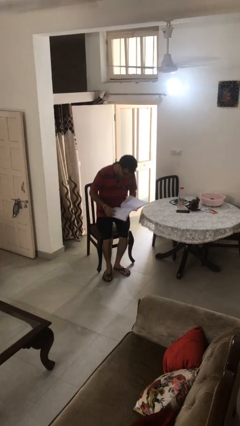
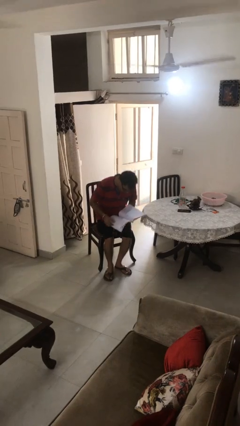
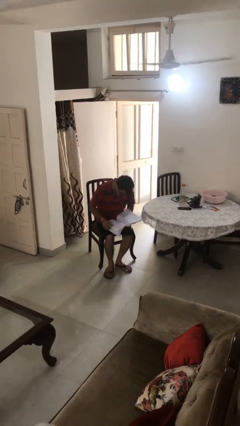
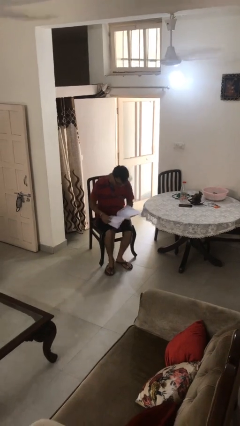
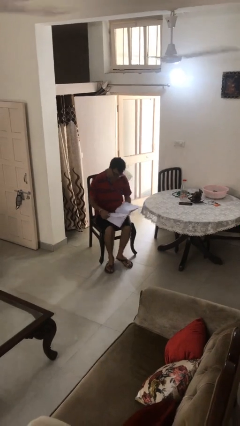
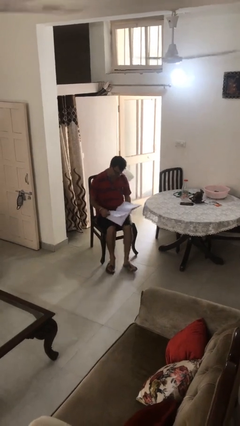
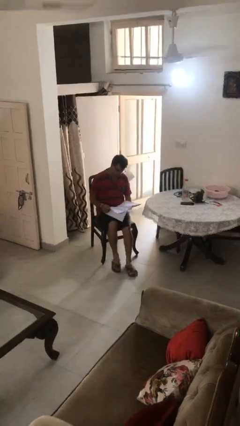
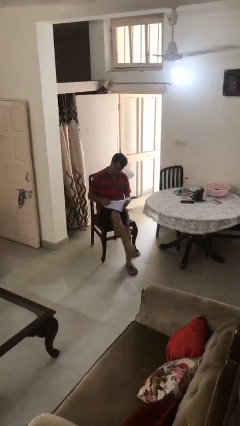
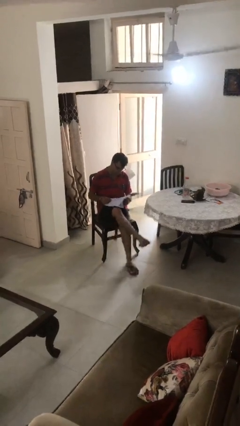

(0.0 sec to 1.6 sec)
person sits down

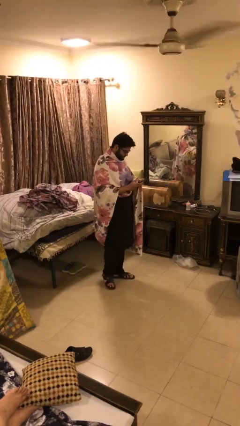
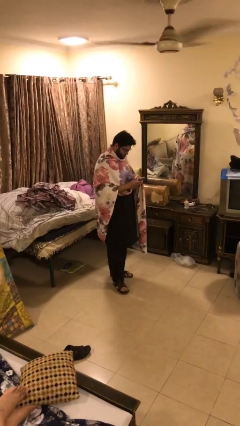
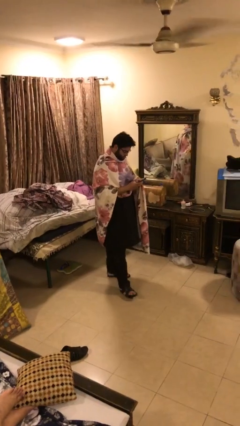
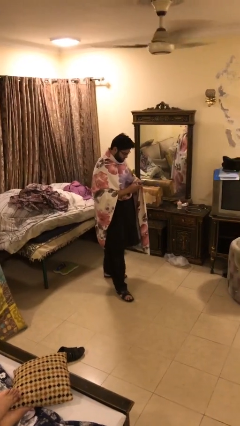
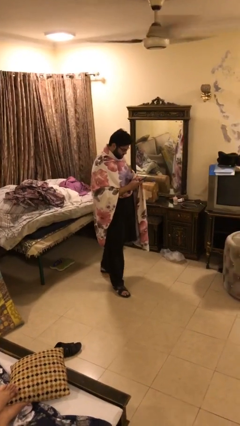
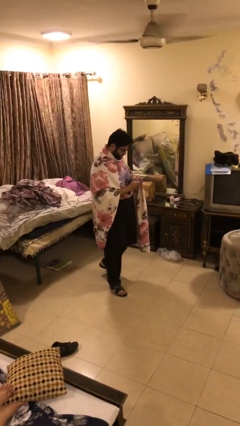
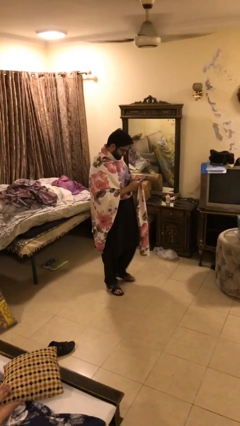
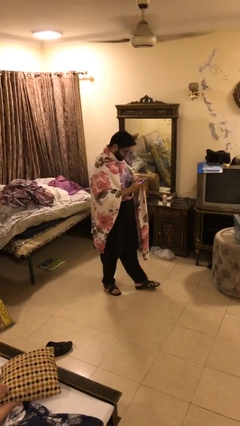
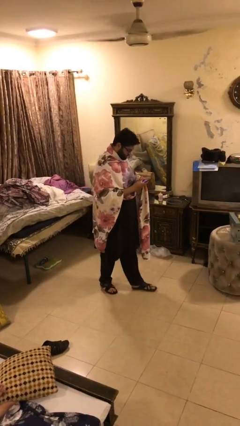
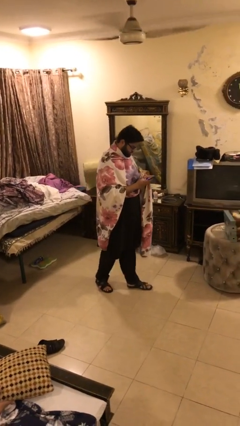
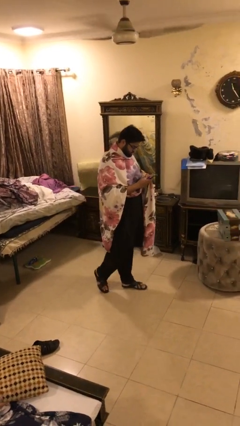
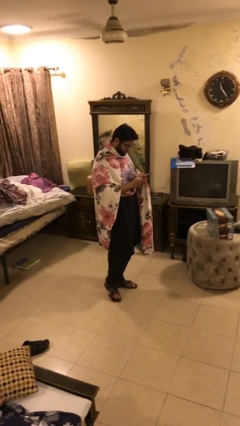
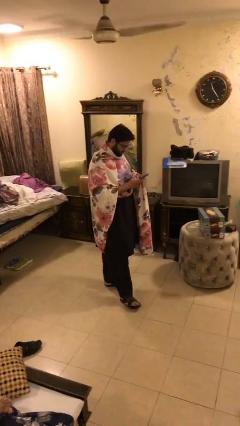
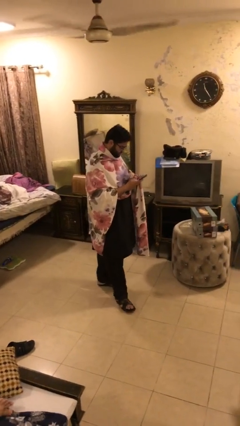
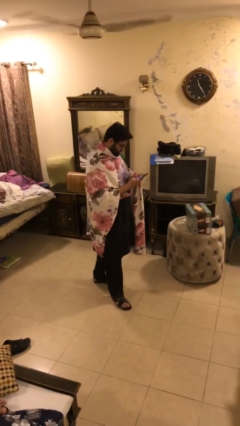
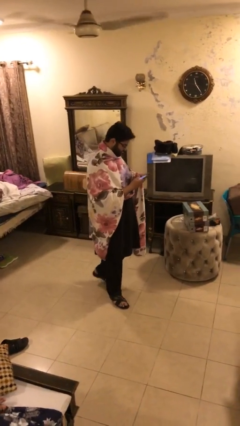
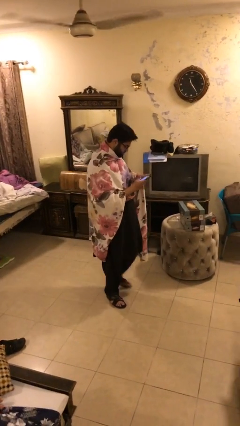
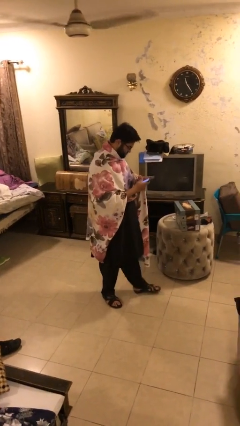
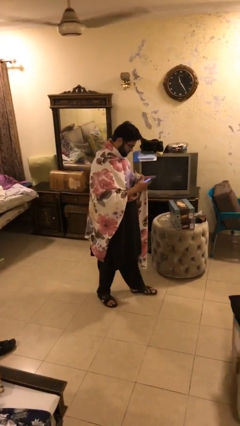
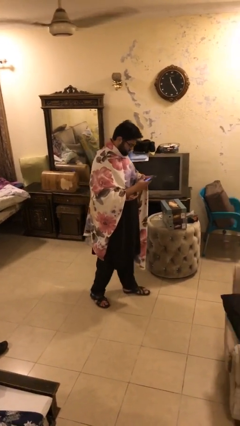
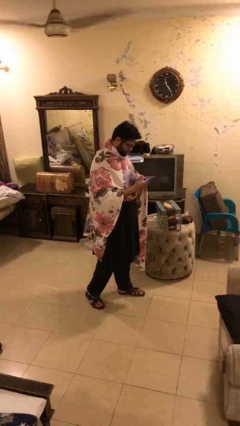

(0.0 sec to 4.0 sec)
person texts on phone

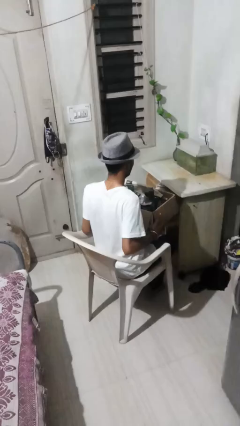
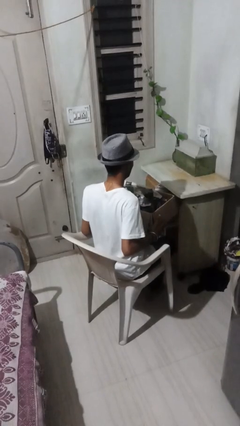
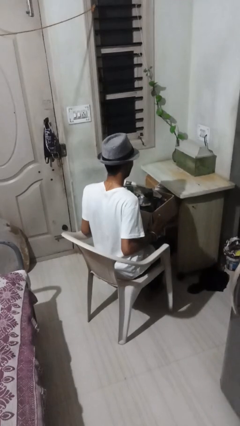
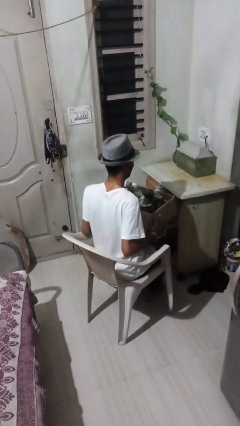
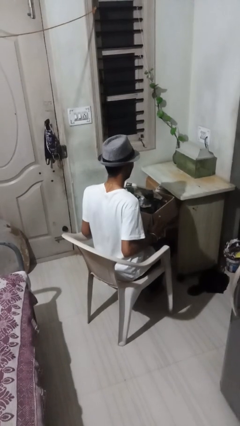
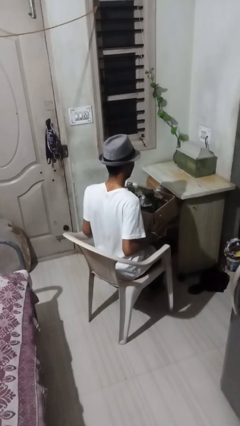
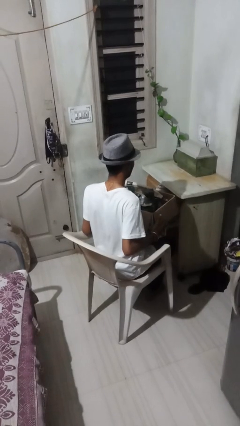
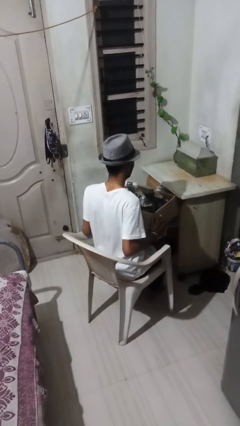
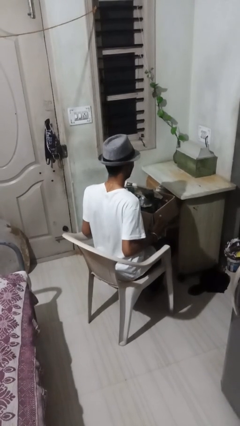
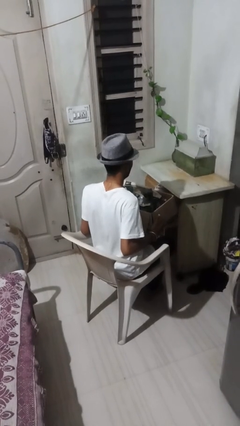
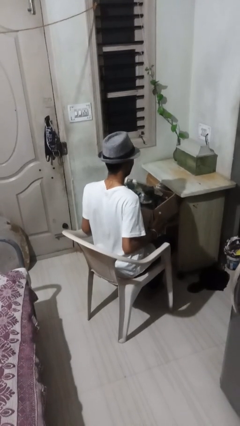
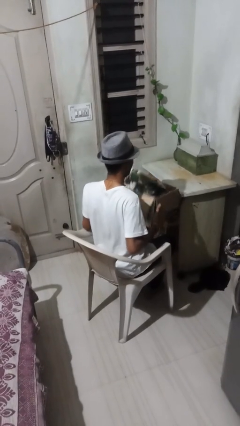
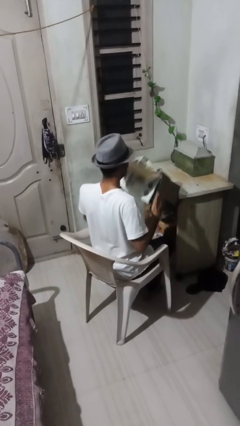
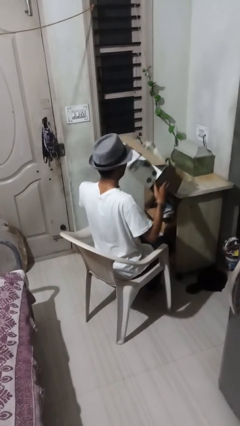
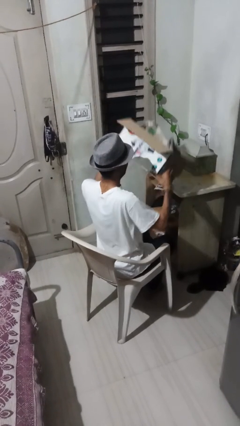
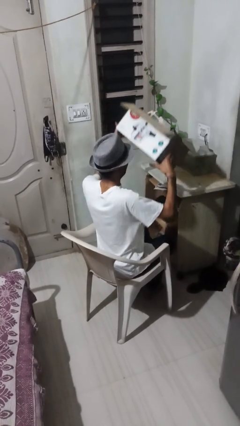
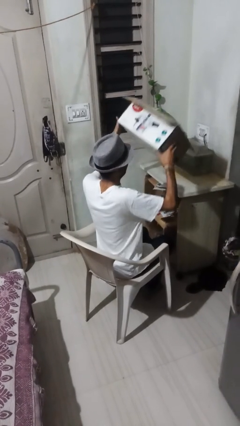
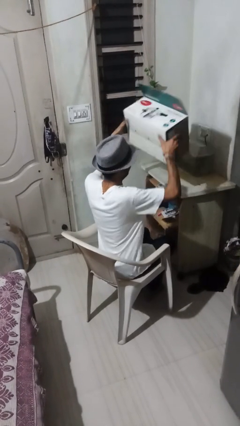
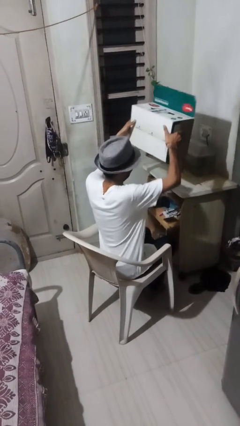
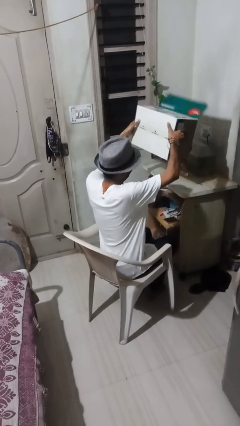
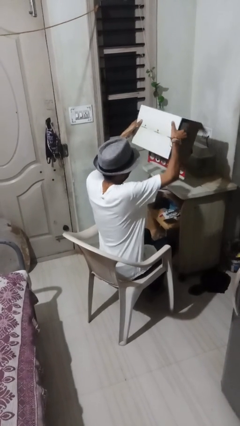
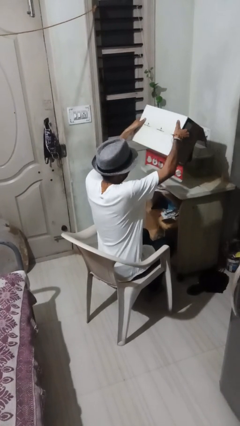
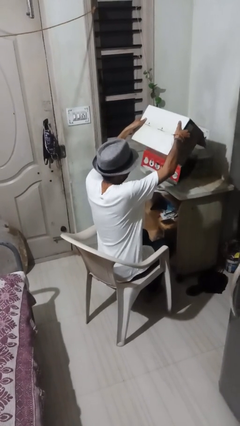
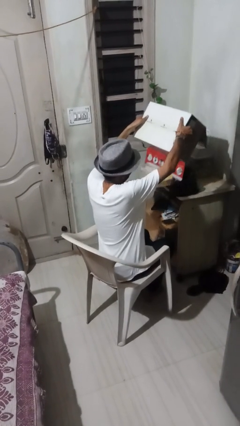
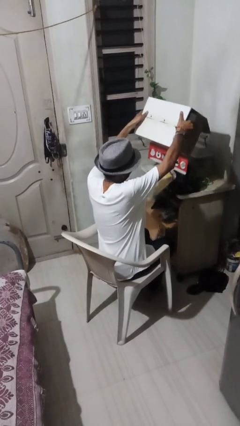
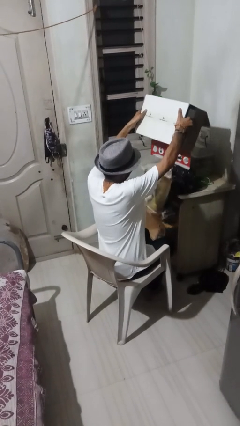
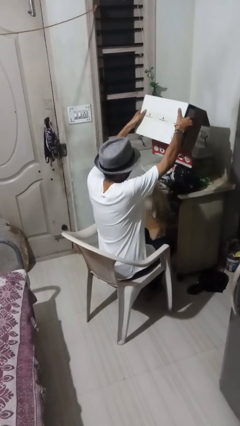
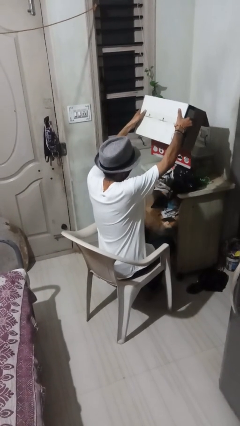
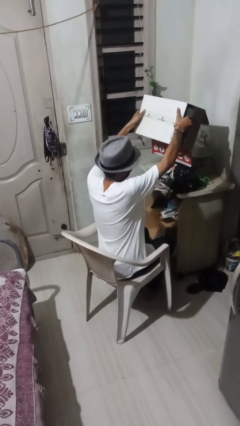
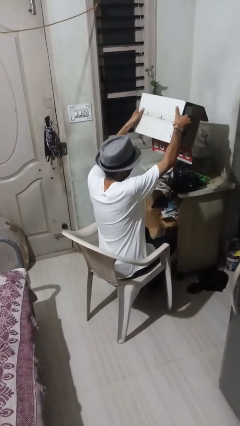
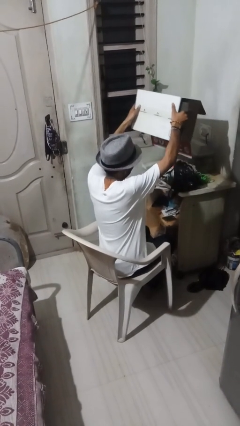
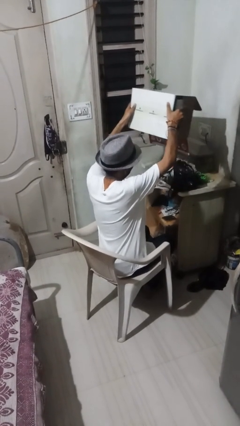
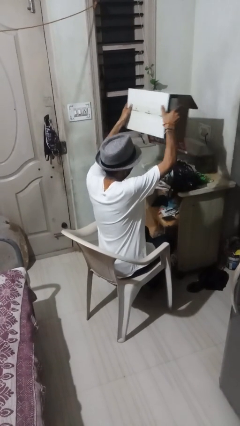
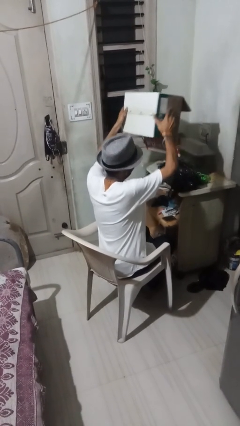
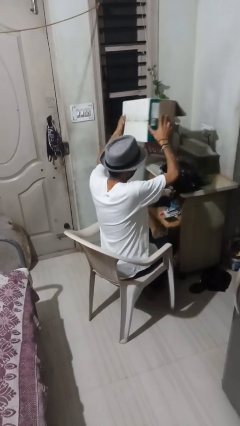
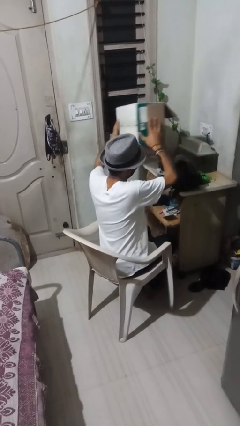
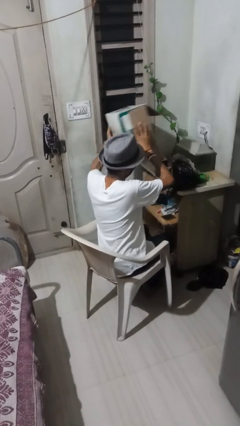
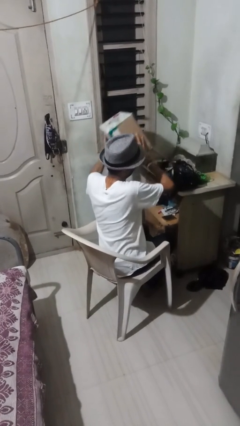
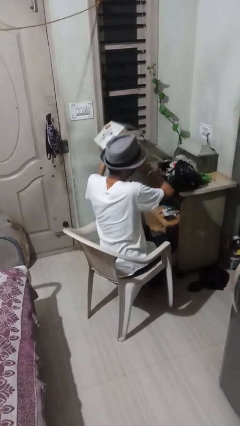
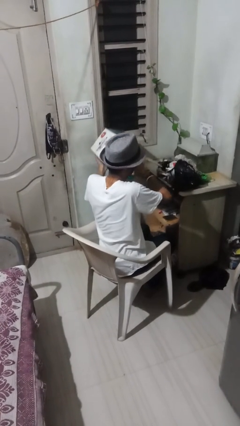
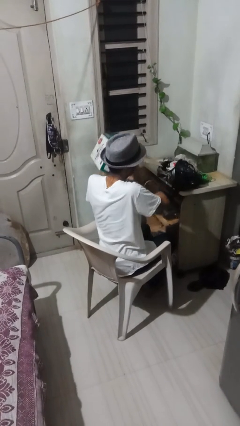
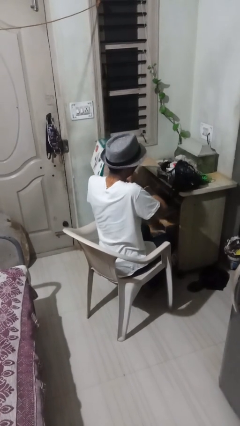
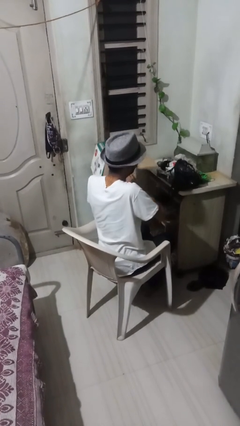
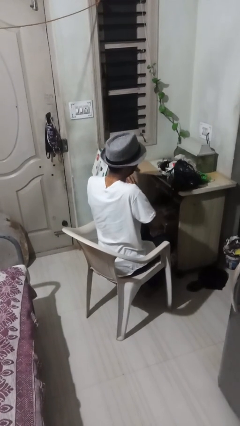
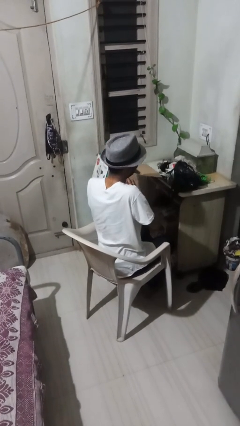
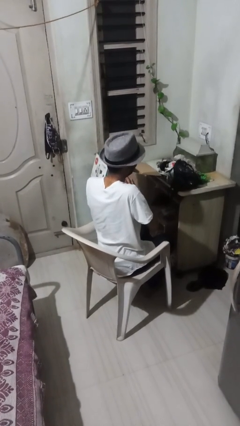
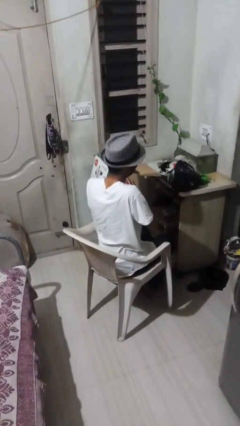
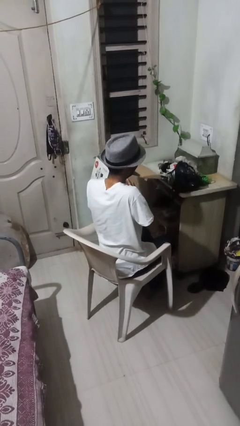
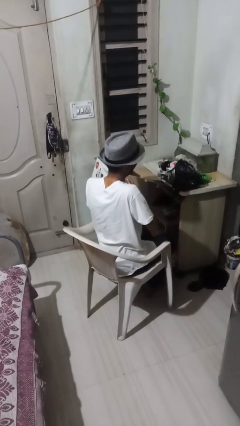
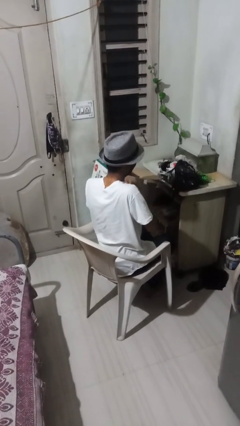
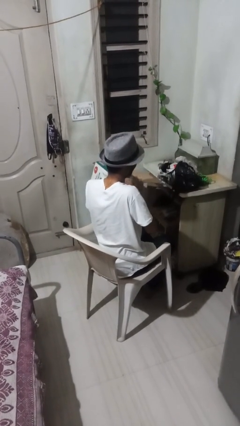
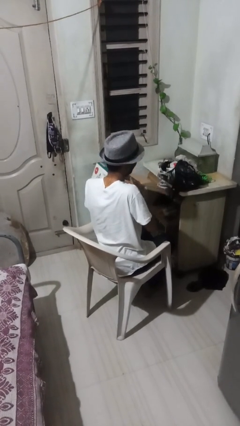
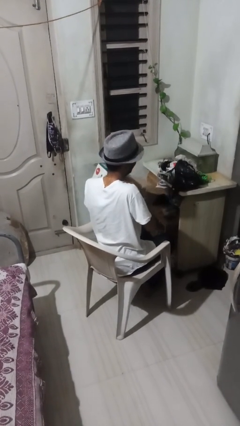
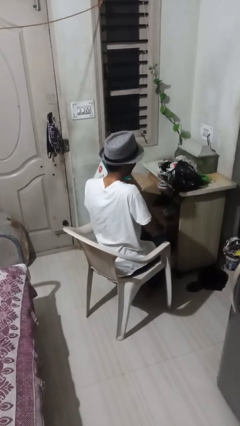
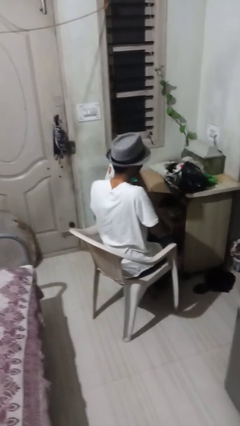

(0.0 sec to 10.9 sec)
person unloads box onto table

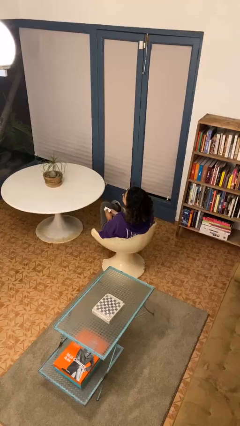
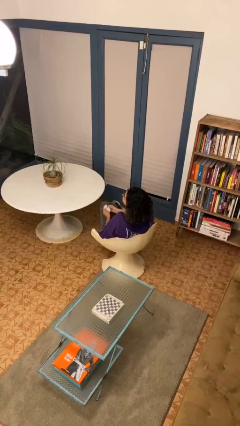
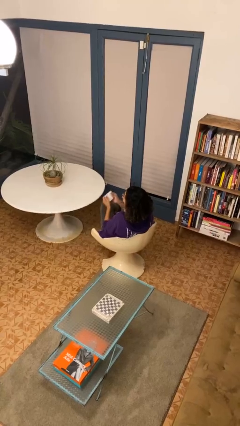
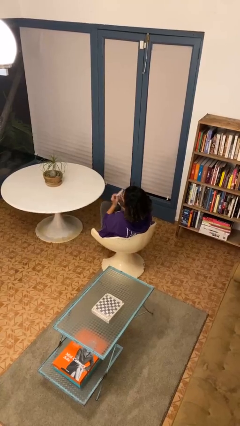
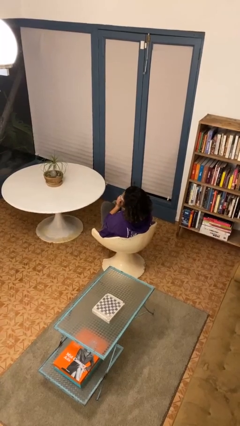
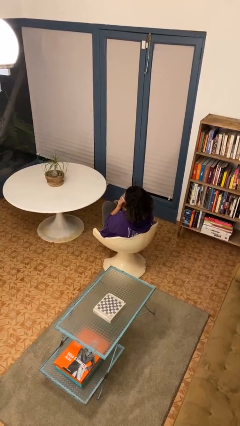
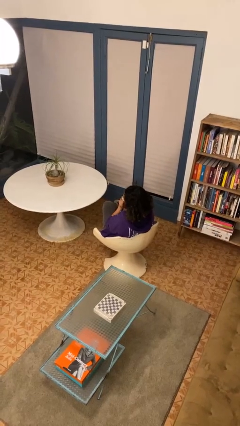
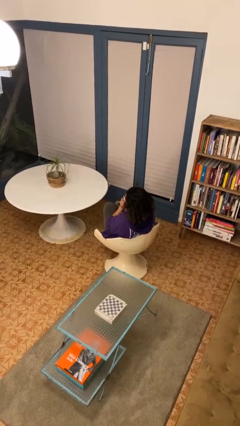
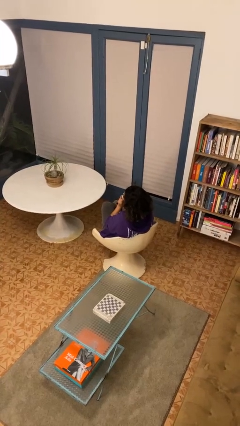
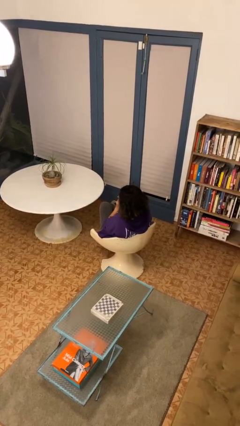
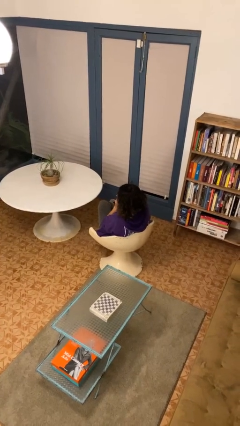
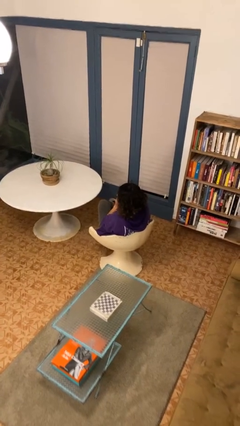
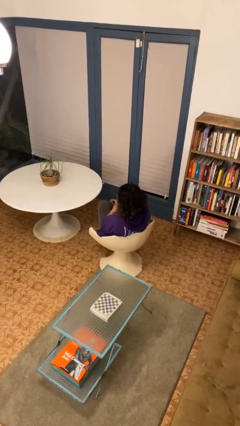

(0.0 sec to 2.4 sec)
person blows nose
